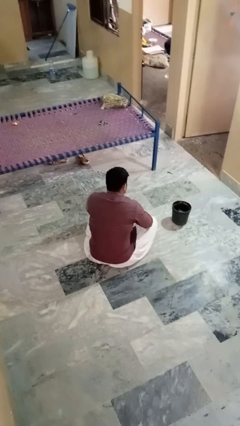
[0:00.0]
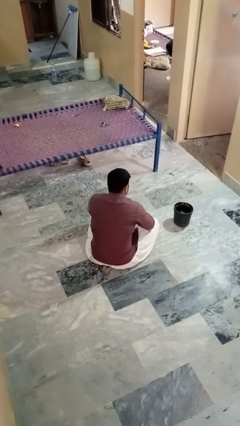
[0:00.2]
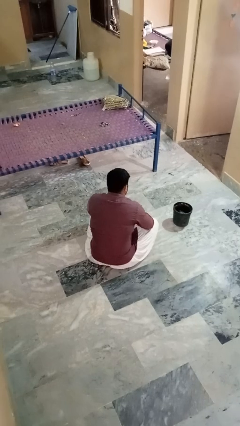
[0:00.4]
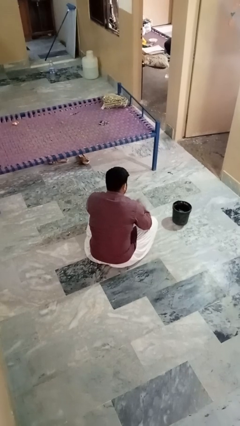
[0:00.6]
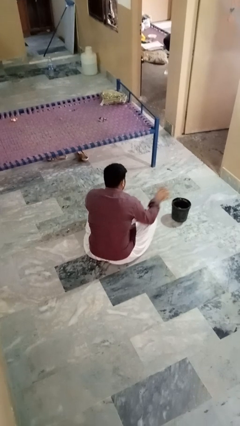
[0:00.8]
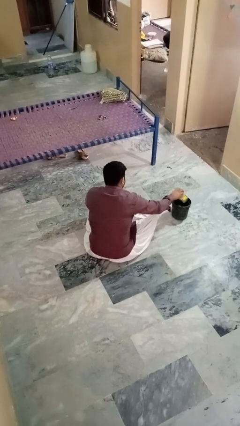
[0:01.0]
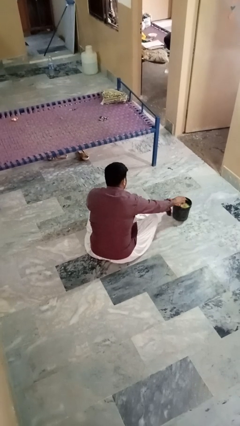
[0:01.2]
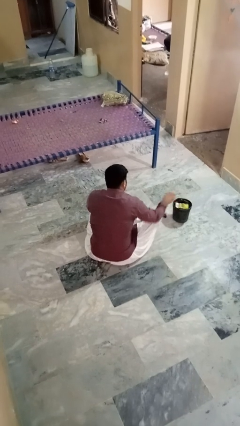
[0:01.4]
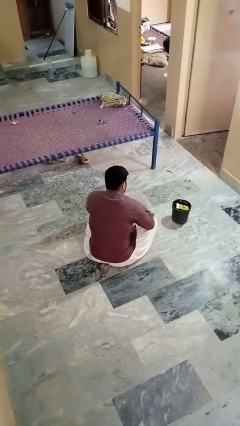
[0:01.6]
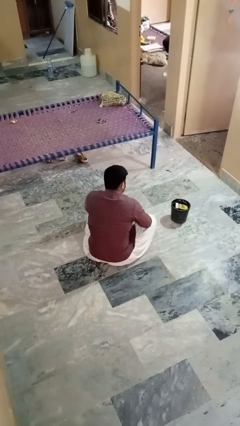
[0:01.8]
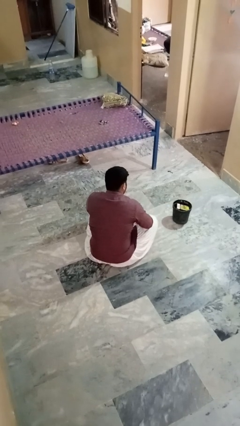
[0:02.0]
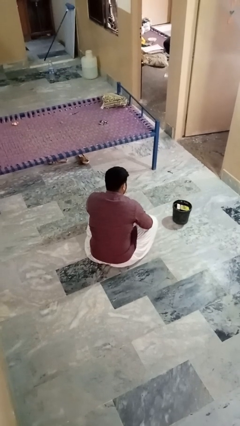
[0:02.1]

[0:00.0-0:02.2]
person puts object into basket

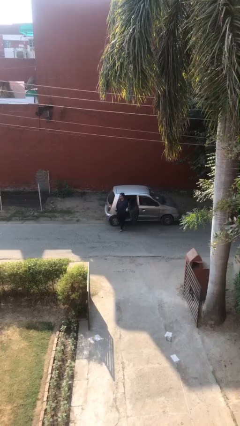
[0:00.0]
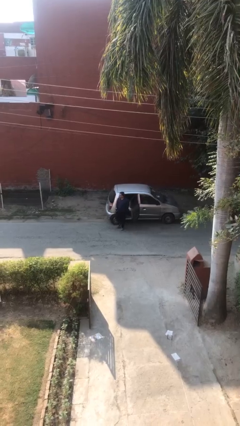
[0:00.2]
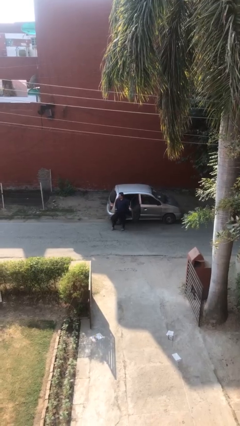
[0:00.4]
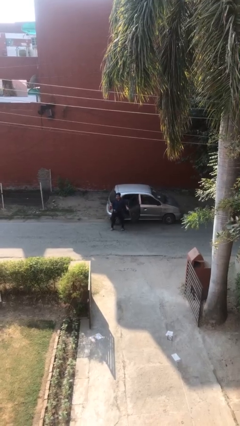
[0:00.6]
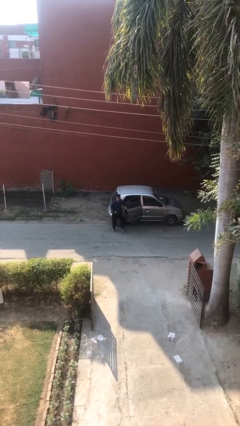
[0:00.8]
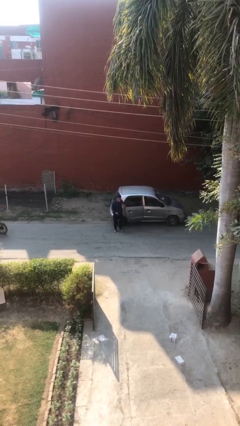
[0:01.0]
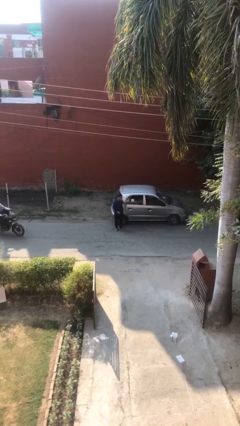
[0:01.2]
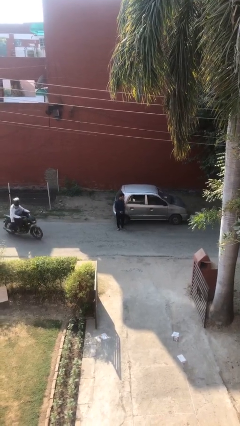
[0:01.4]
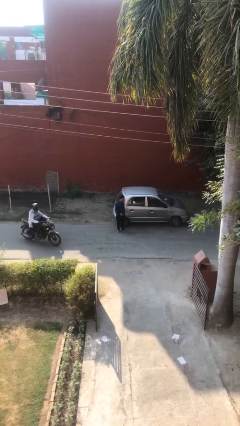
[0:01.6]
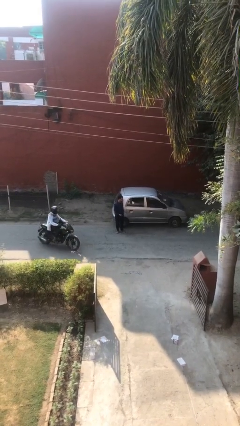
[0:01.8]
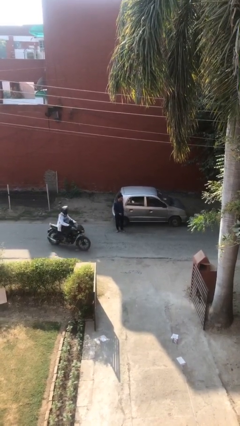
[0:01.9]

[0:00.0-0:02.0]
person closes car door

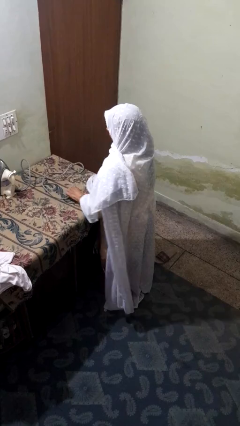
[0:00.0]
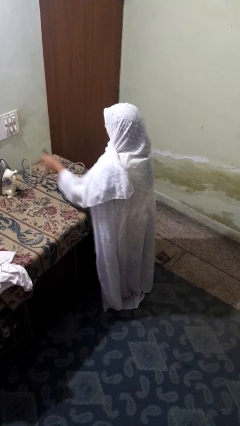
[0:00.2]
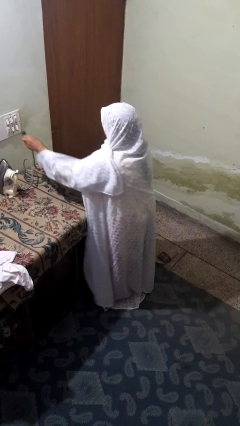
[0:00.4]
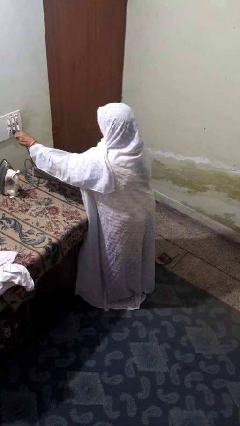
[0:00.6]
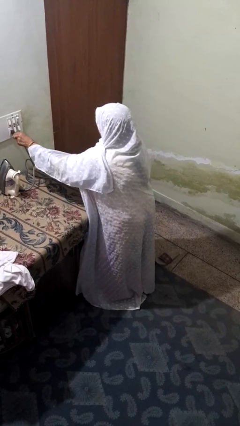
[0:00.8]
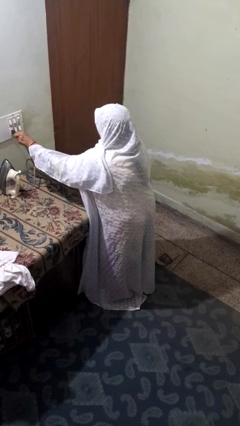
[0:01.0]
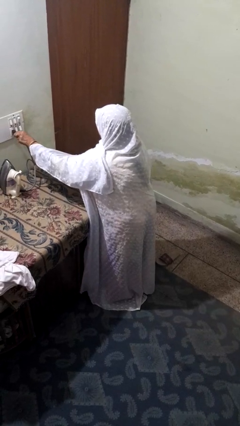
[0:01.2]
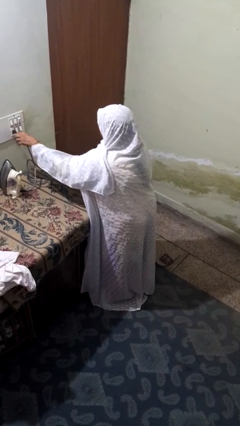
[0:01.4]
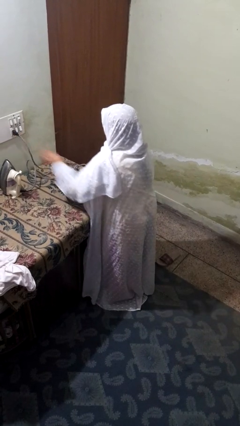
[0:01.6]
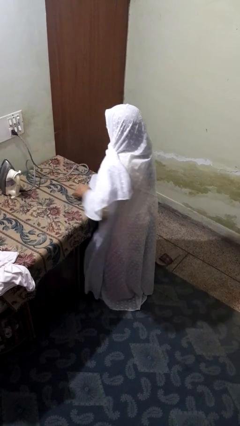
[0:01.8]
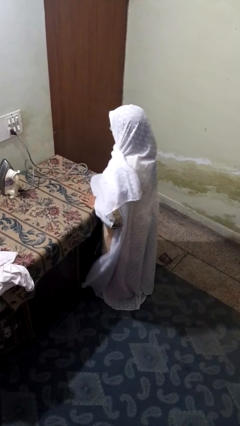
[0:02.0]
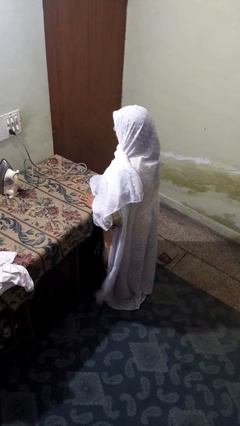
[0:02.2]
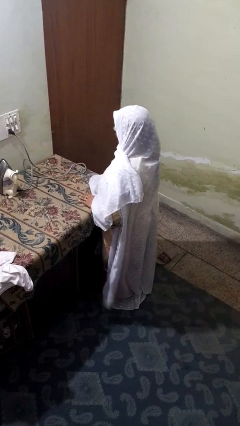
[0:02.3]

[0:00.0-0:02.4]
person plugs into electrical socket

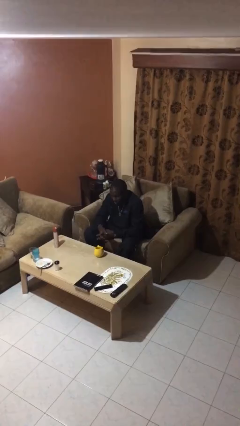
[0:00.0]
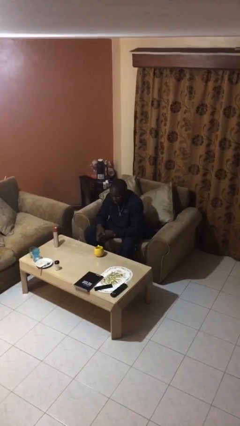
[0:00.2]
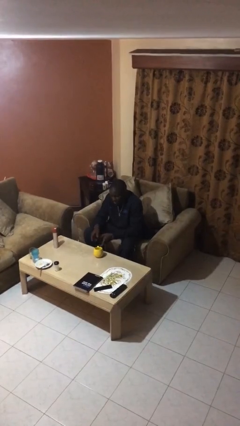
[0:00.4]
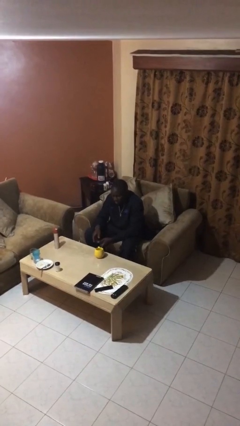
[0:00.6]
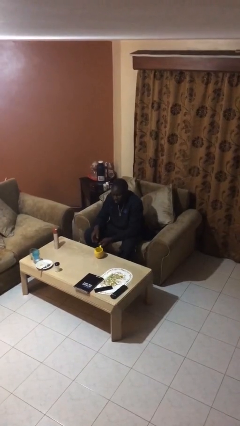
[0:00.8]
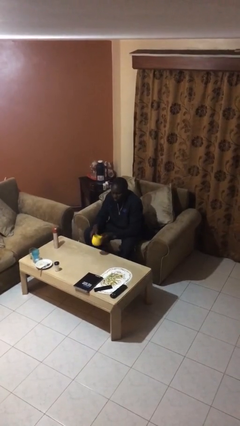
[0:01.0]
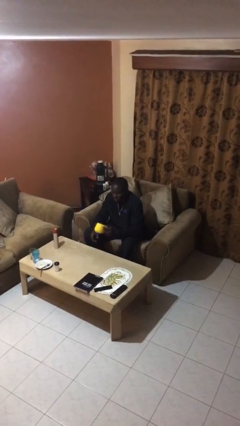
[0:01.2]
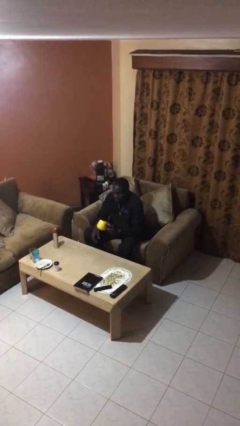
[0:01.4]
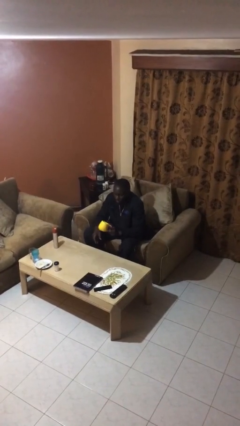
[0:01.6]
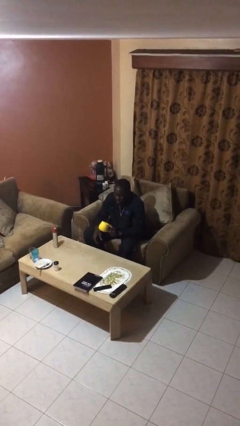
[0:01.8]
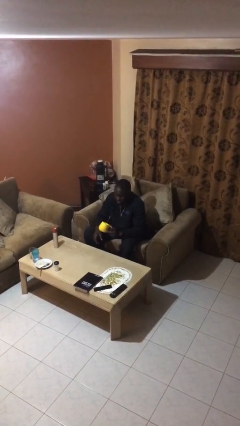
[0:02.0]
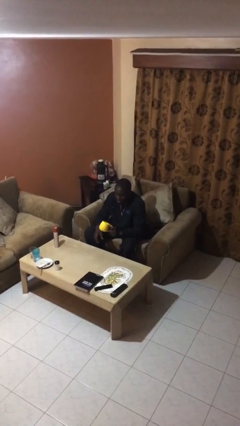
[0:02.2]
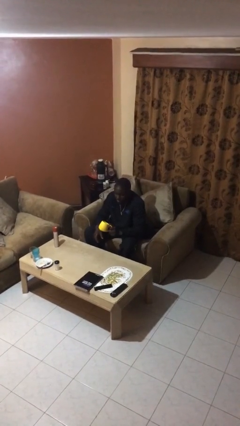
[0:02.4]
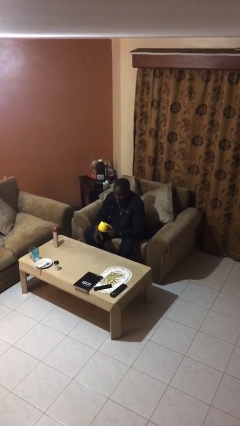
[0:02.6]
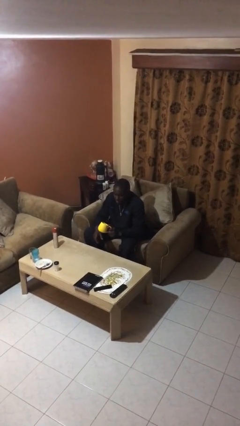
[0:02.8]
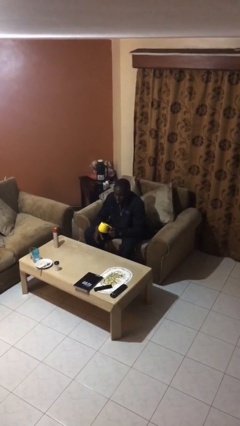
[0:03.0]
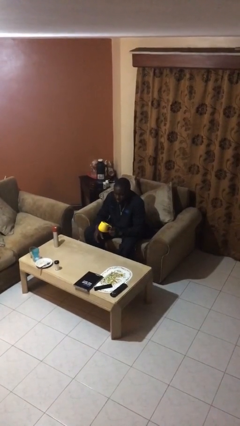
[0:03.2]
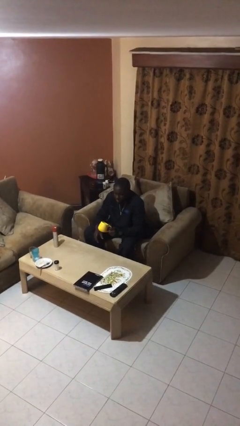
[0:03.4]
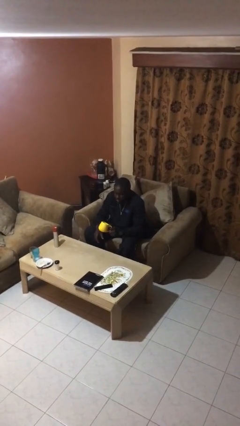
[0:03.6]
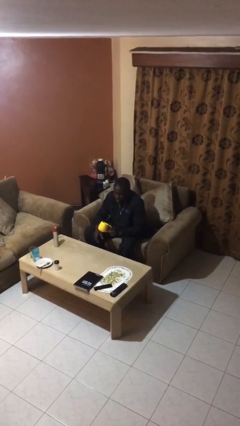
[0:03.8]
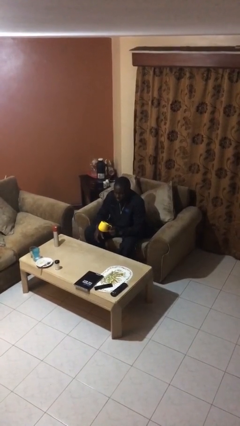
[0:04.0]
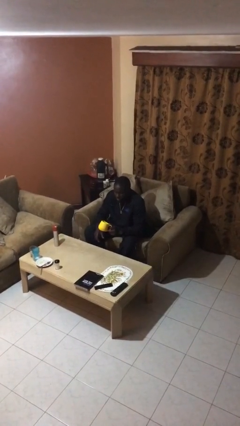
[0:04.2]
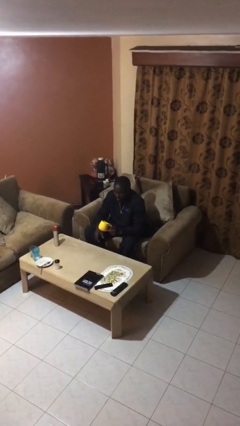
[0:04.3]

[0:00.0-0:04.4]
person picks up object from table

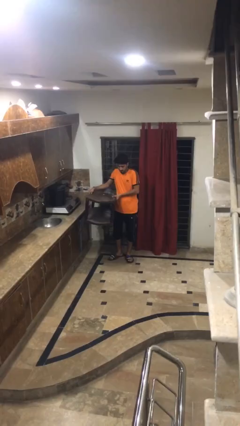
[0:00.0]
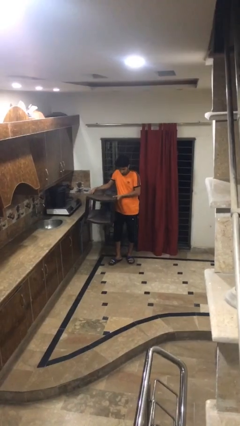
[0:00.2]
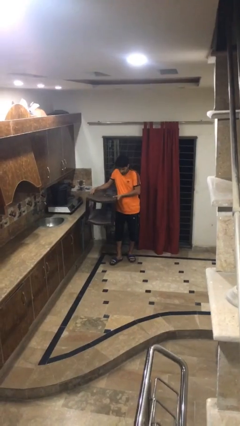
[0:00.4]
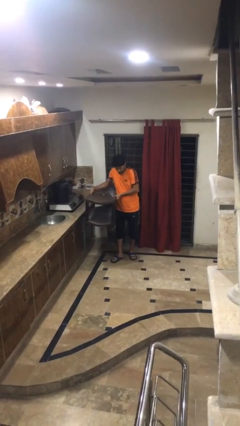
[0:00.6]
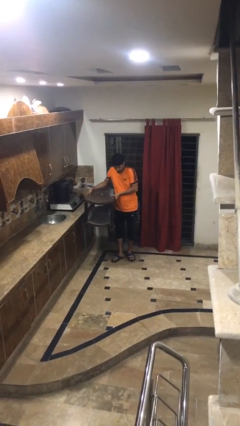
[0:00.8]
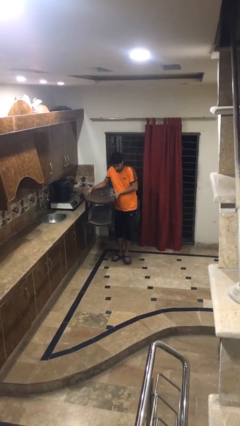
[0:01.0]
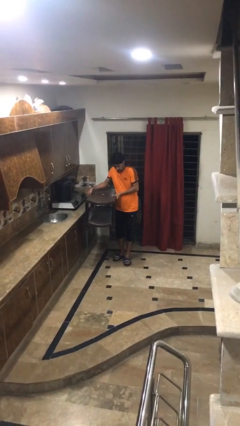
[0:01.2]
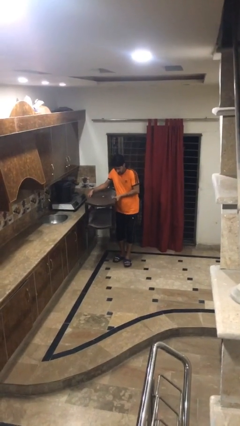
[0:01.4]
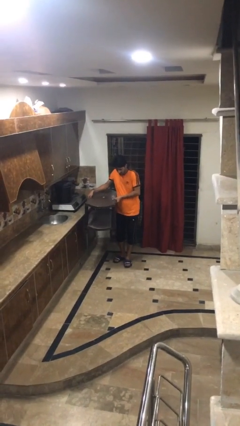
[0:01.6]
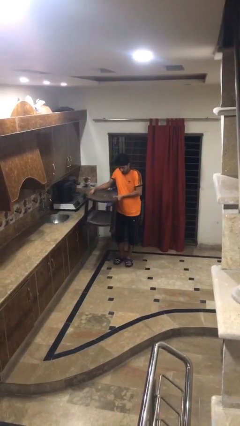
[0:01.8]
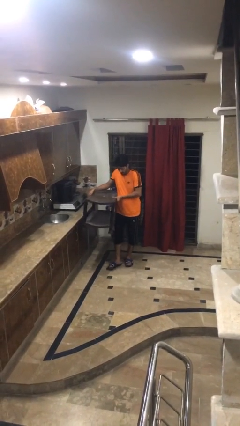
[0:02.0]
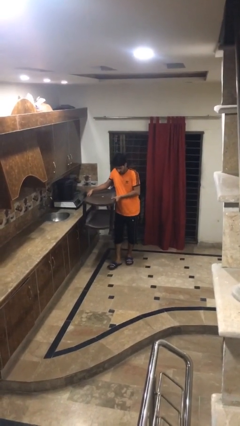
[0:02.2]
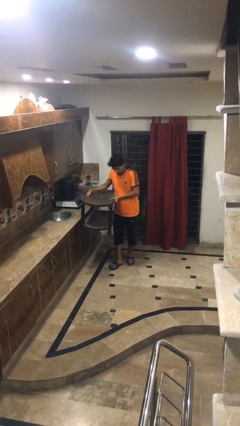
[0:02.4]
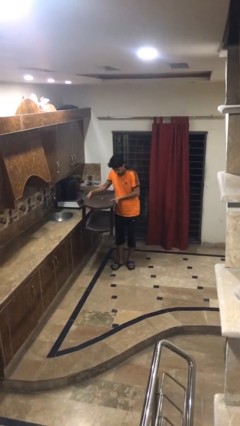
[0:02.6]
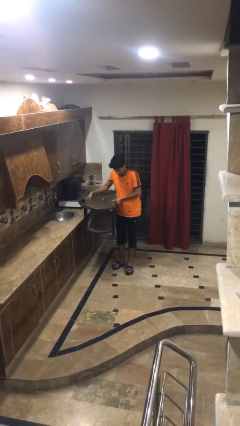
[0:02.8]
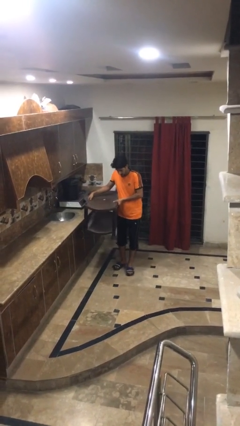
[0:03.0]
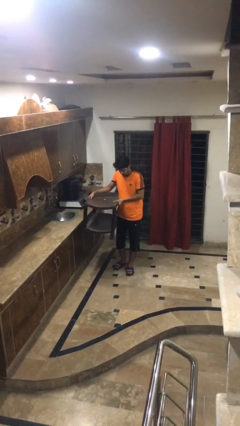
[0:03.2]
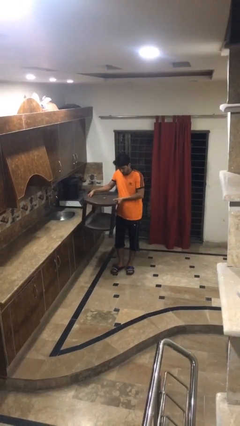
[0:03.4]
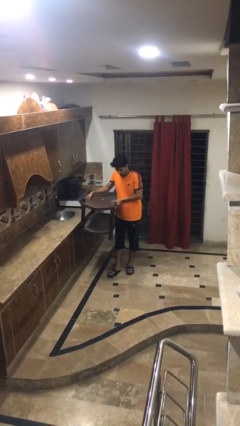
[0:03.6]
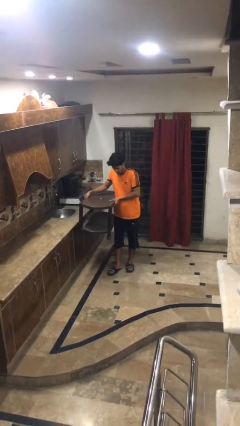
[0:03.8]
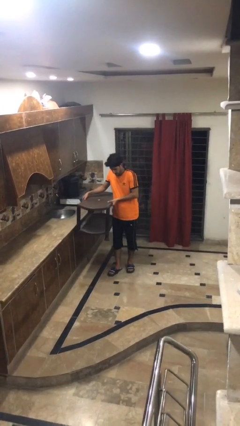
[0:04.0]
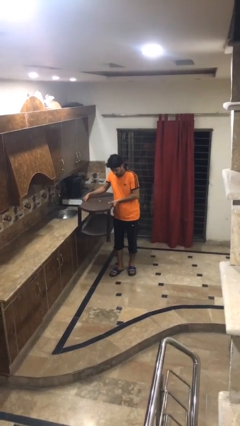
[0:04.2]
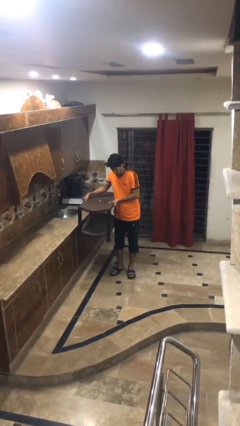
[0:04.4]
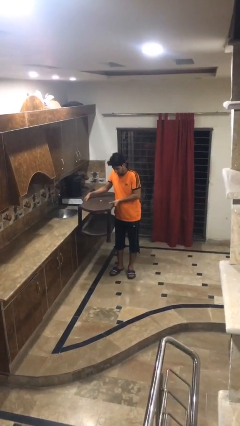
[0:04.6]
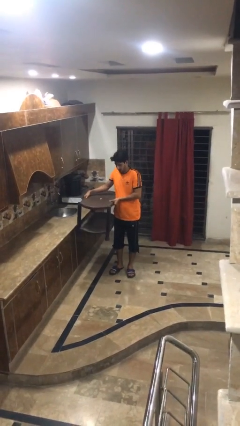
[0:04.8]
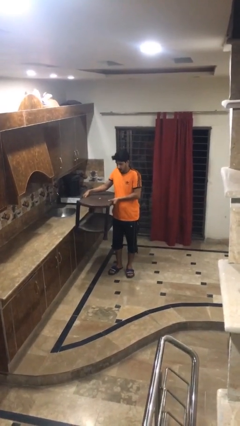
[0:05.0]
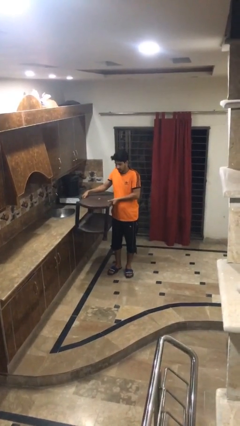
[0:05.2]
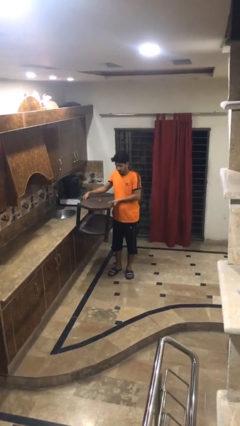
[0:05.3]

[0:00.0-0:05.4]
person carries furniture

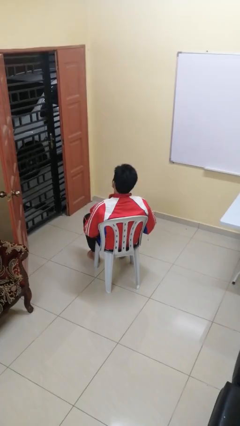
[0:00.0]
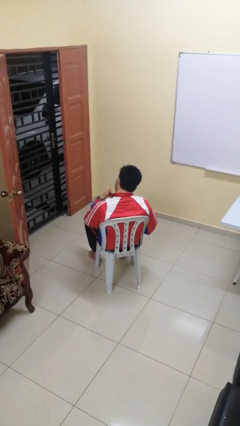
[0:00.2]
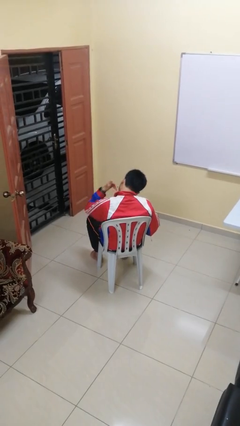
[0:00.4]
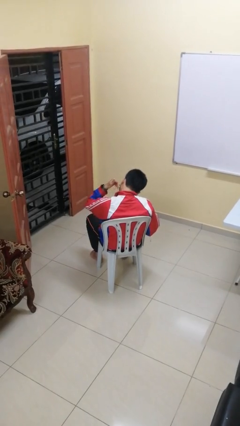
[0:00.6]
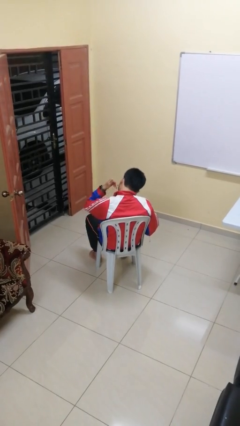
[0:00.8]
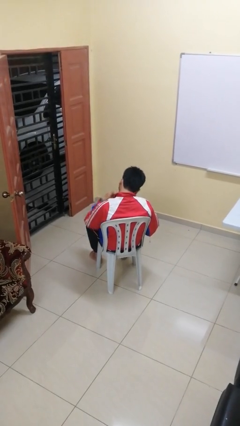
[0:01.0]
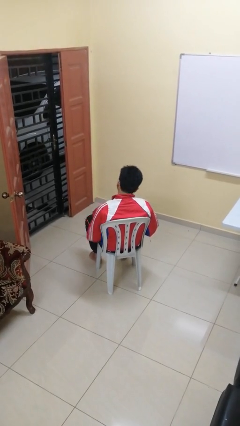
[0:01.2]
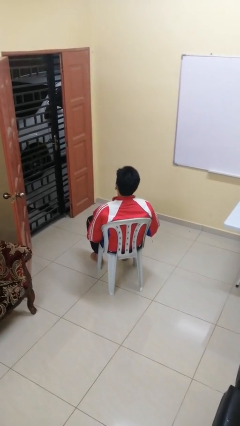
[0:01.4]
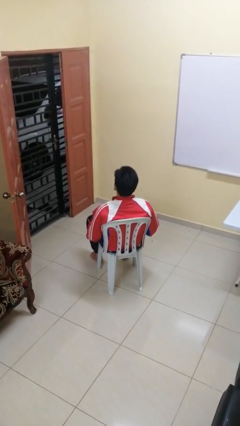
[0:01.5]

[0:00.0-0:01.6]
person gestures call me
